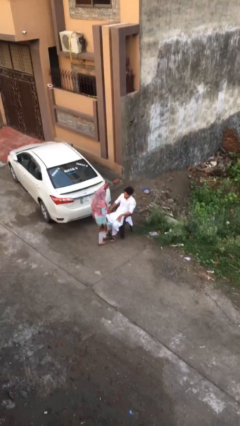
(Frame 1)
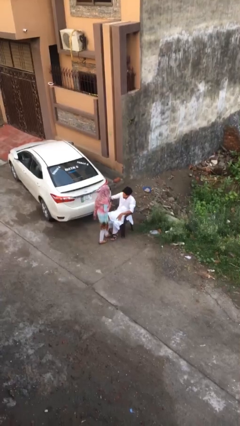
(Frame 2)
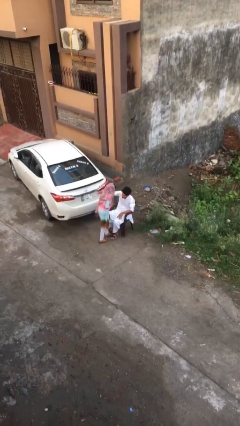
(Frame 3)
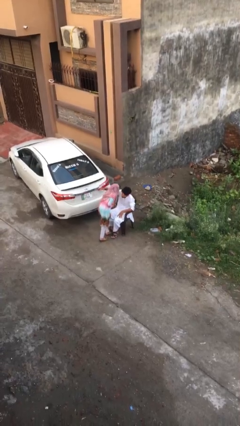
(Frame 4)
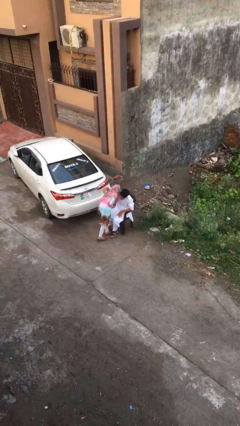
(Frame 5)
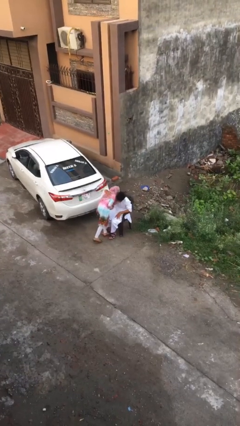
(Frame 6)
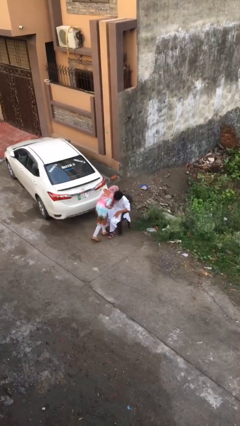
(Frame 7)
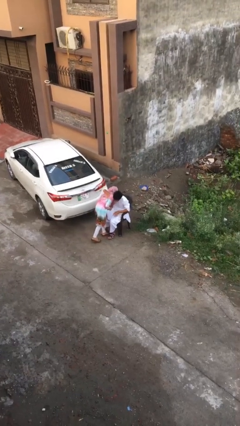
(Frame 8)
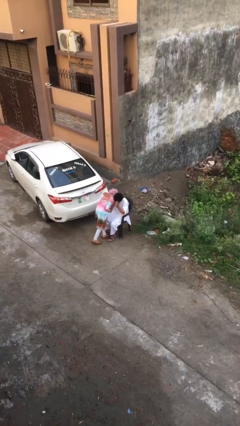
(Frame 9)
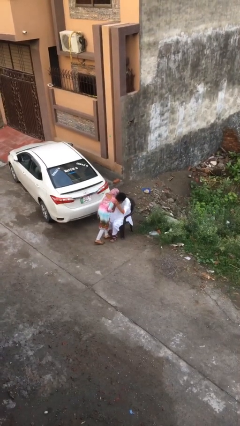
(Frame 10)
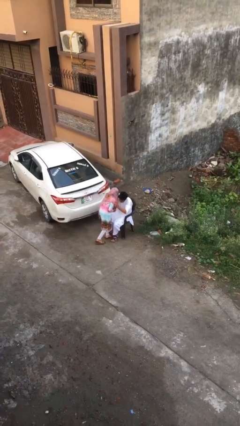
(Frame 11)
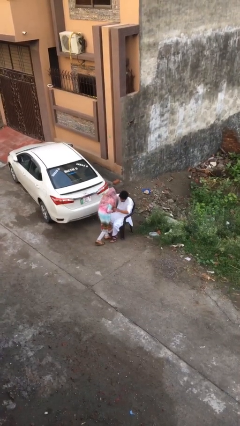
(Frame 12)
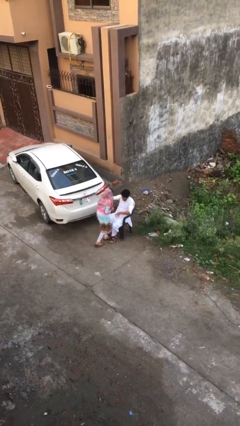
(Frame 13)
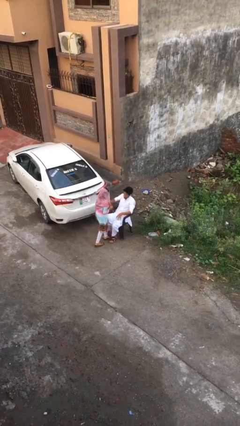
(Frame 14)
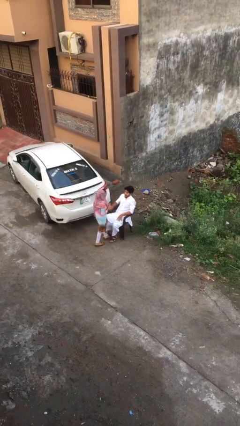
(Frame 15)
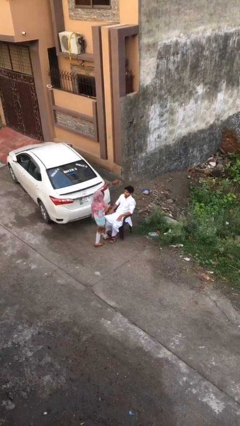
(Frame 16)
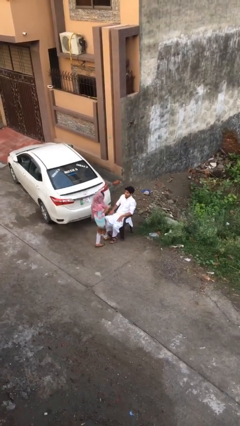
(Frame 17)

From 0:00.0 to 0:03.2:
person embraces person

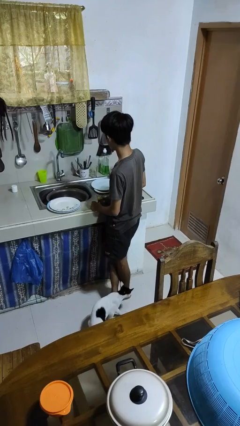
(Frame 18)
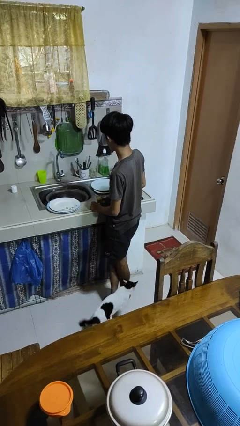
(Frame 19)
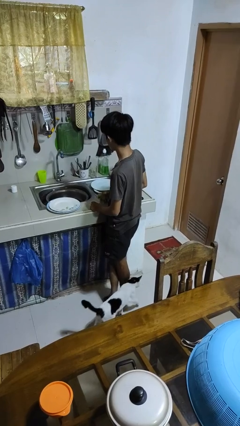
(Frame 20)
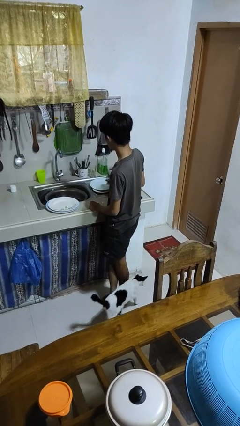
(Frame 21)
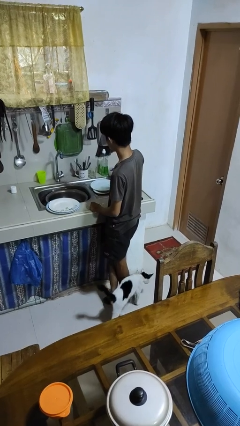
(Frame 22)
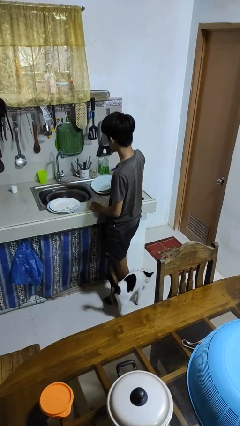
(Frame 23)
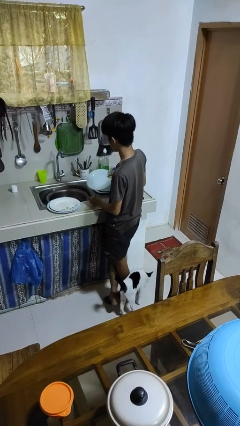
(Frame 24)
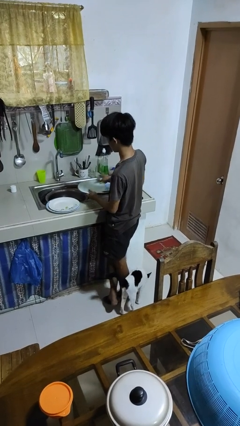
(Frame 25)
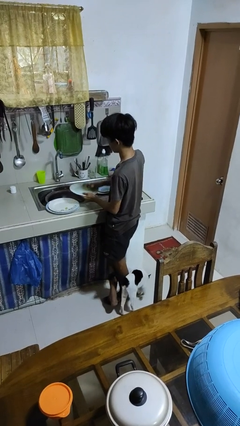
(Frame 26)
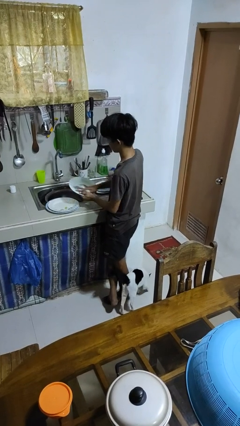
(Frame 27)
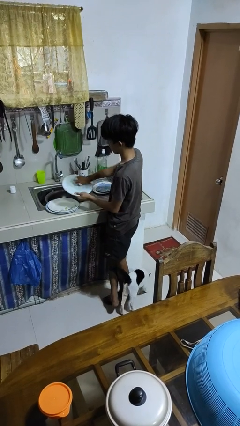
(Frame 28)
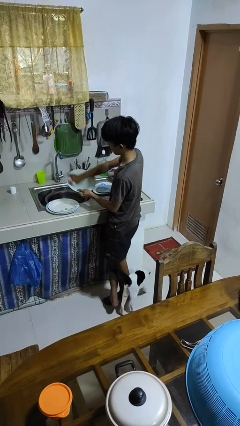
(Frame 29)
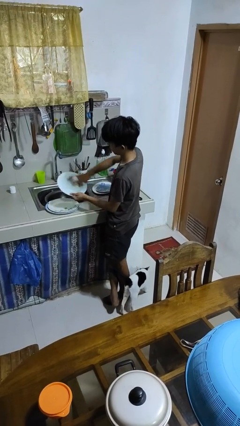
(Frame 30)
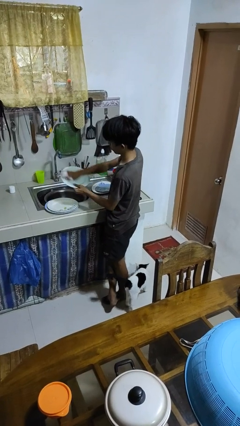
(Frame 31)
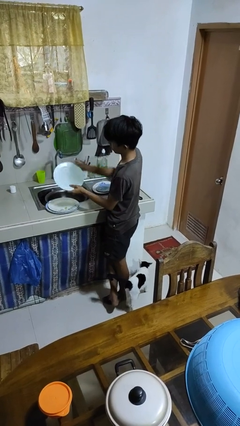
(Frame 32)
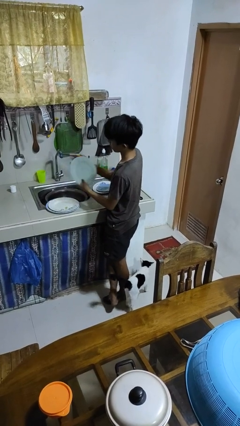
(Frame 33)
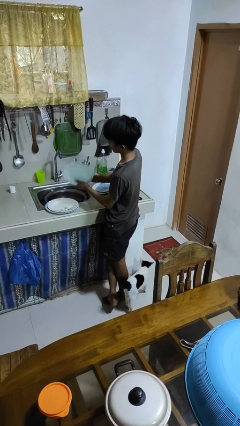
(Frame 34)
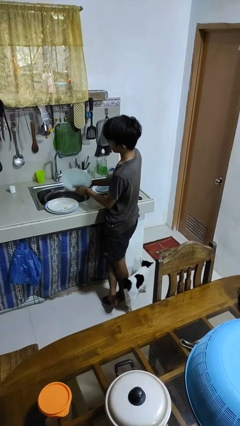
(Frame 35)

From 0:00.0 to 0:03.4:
person washes hands

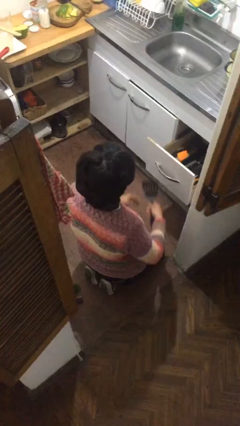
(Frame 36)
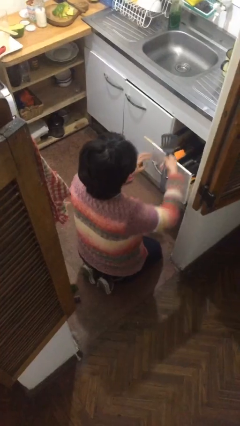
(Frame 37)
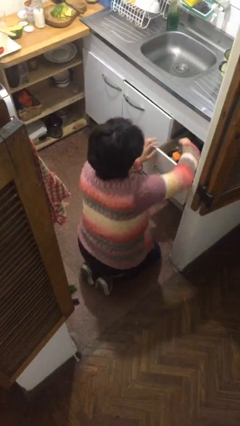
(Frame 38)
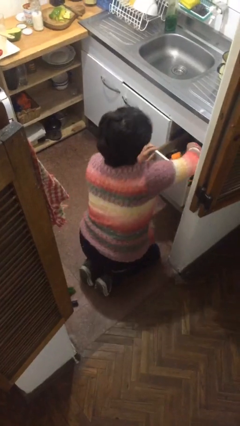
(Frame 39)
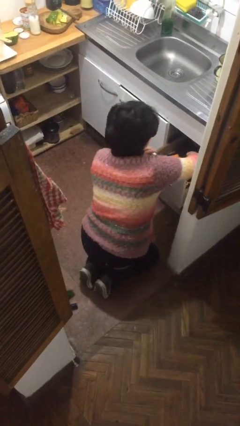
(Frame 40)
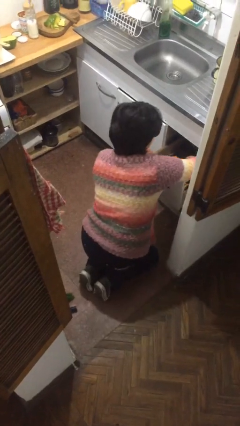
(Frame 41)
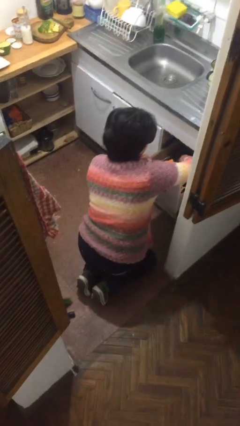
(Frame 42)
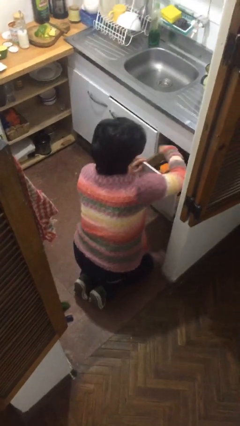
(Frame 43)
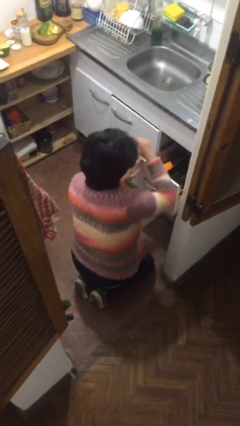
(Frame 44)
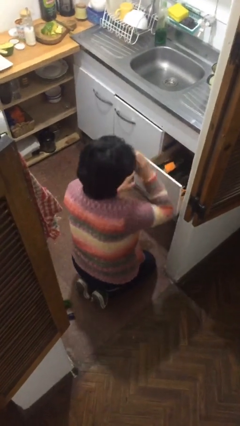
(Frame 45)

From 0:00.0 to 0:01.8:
person puts object into kitchen drawer

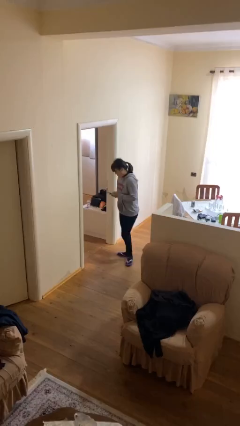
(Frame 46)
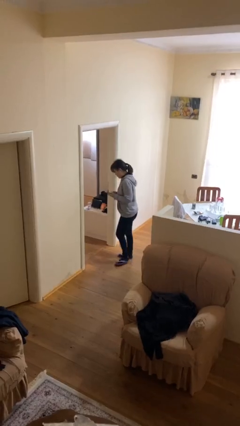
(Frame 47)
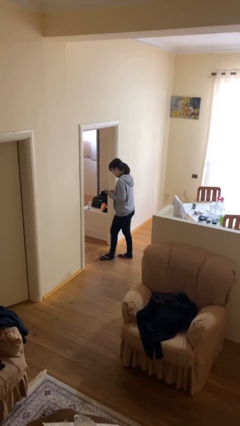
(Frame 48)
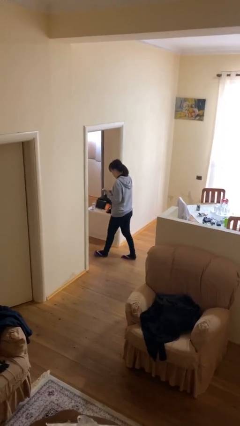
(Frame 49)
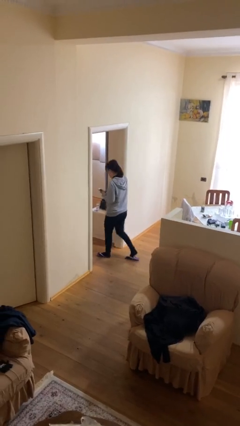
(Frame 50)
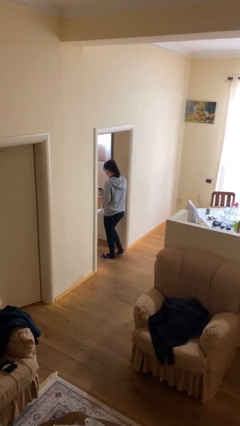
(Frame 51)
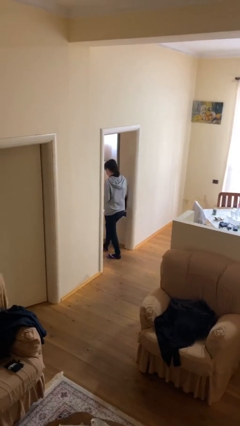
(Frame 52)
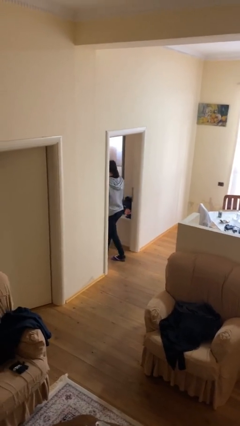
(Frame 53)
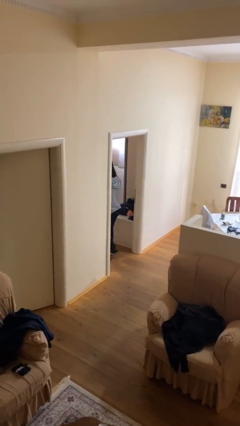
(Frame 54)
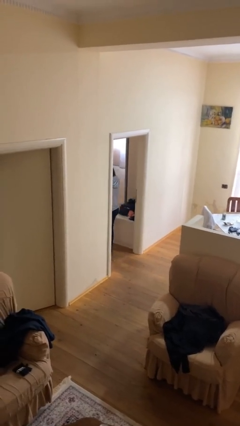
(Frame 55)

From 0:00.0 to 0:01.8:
person exits scene through structure

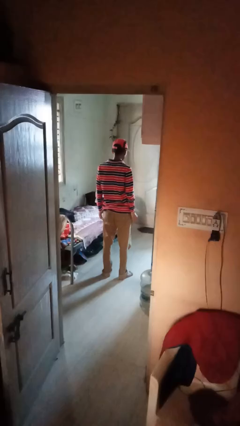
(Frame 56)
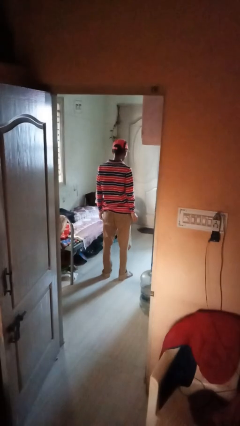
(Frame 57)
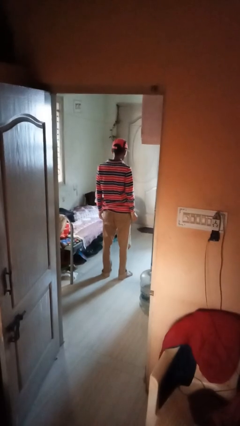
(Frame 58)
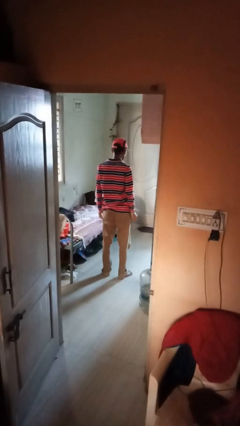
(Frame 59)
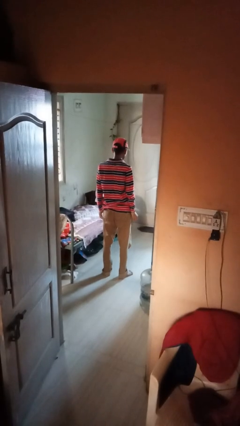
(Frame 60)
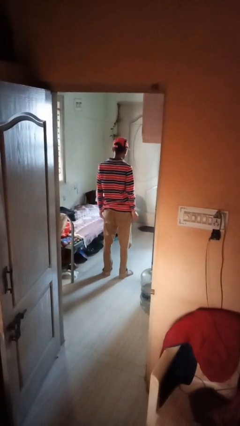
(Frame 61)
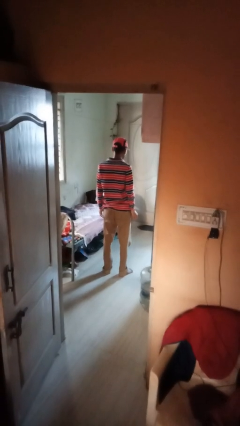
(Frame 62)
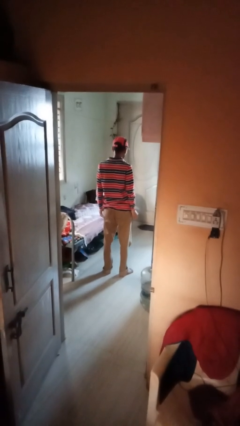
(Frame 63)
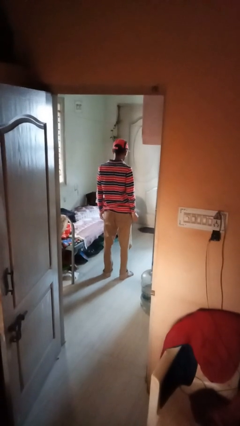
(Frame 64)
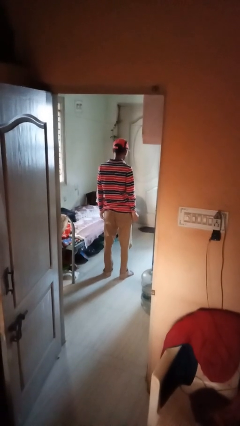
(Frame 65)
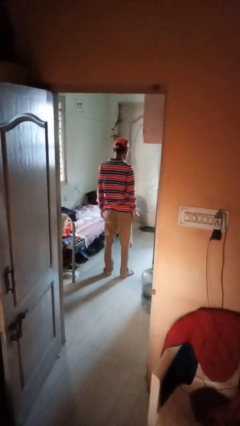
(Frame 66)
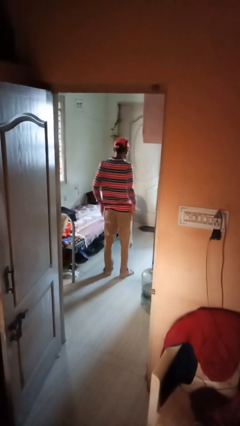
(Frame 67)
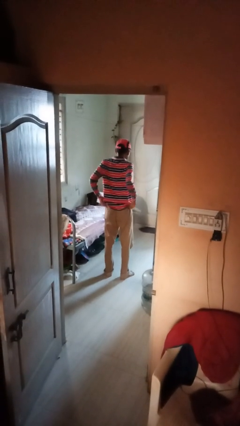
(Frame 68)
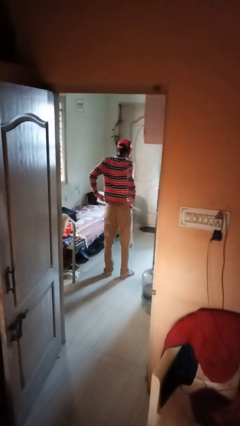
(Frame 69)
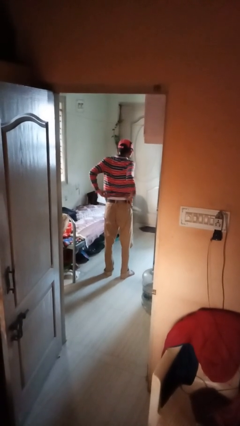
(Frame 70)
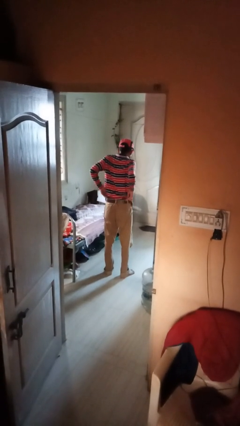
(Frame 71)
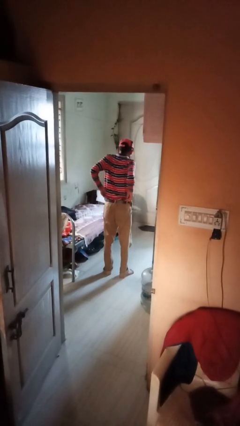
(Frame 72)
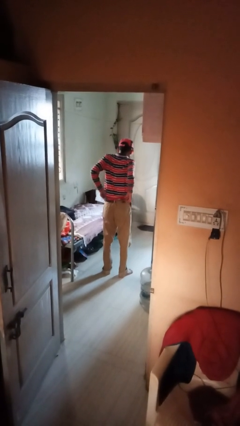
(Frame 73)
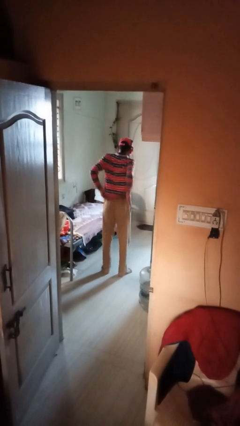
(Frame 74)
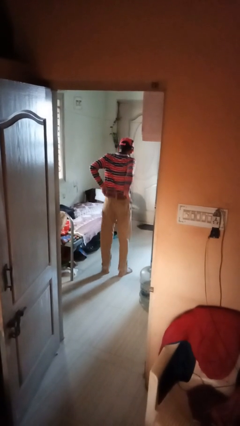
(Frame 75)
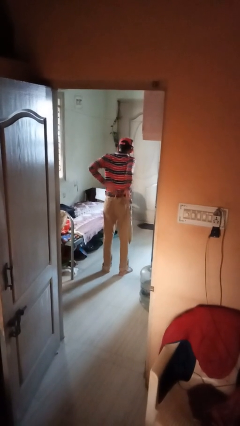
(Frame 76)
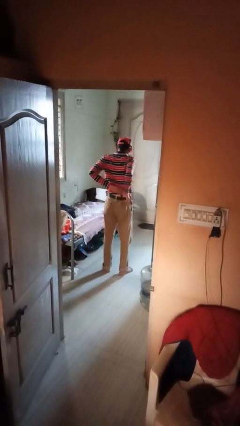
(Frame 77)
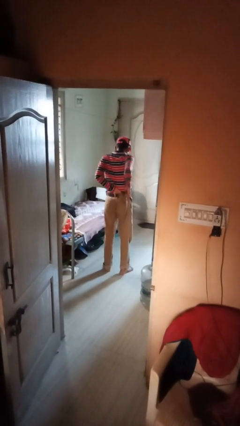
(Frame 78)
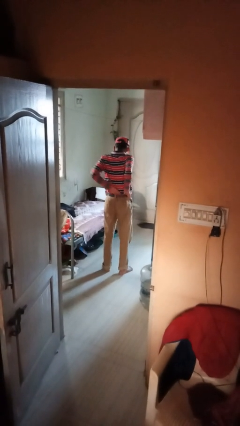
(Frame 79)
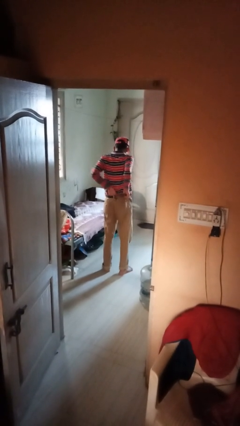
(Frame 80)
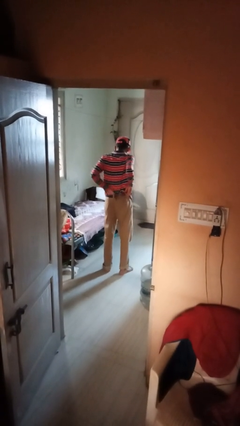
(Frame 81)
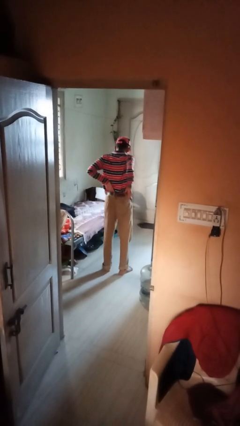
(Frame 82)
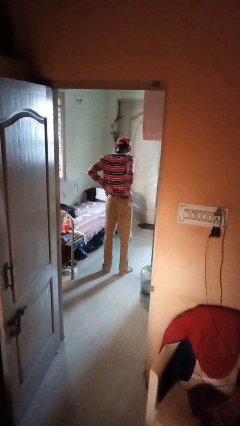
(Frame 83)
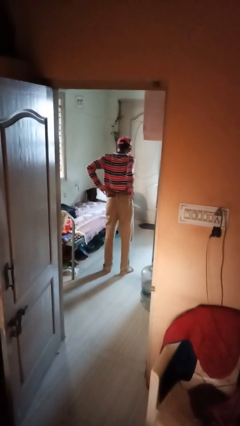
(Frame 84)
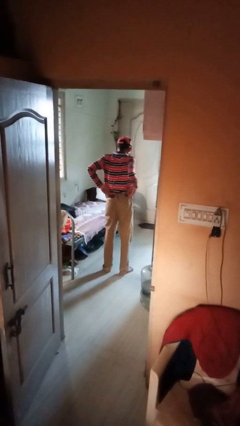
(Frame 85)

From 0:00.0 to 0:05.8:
person tucks in shirt

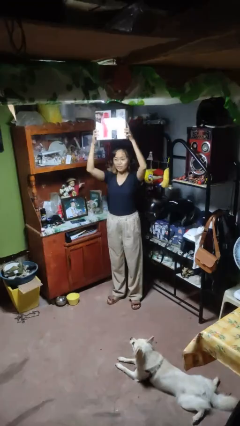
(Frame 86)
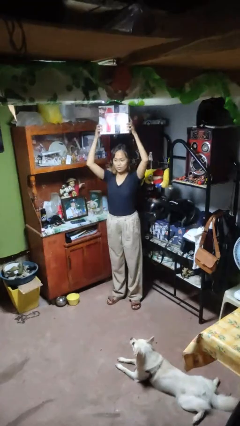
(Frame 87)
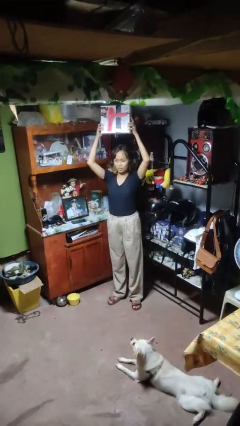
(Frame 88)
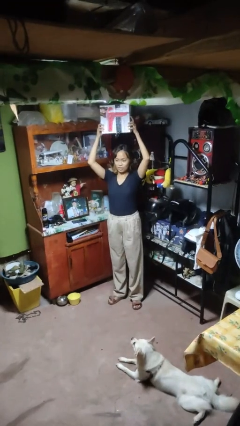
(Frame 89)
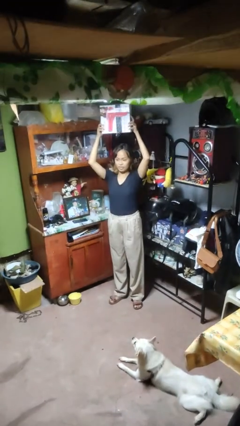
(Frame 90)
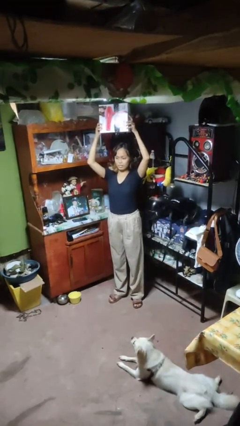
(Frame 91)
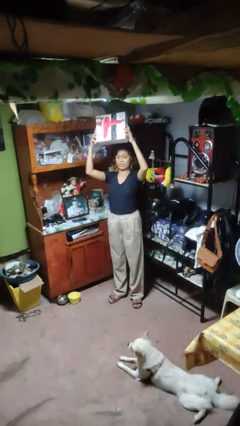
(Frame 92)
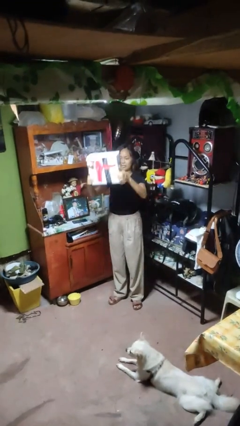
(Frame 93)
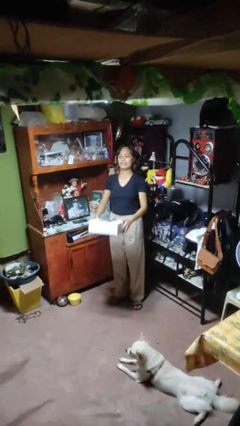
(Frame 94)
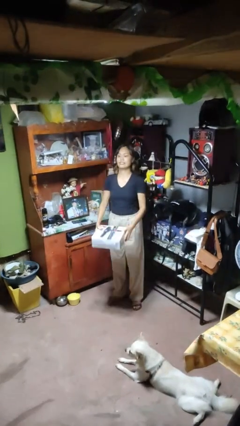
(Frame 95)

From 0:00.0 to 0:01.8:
person holds object above head
